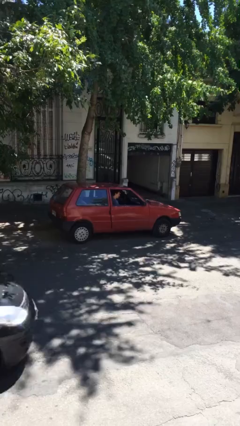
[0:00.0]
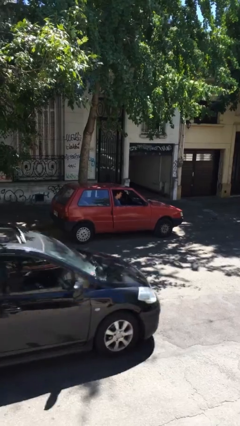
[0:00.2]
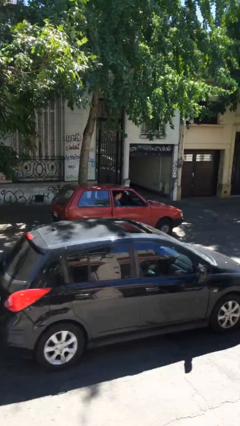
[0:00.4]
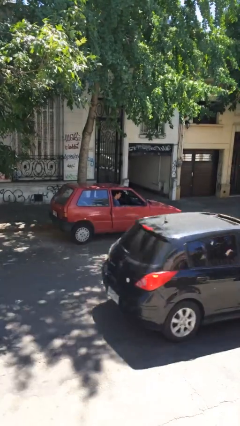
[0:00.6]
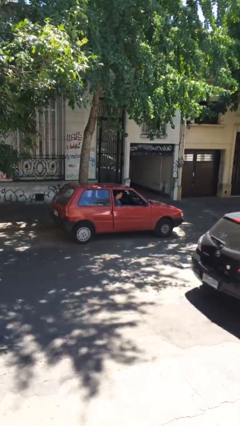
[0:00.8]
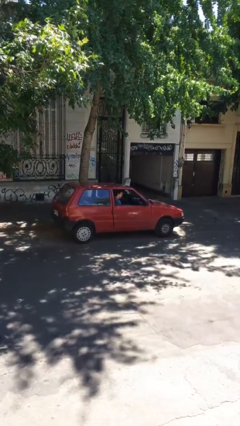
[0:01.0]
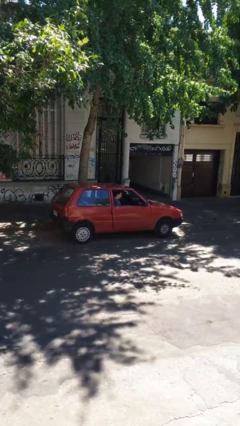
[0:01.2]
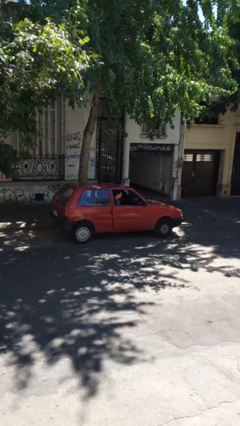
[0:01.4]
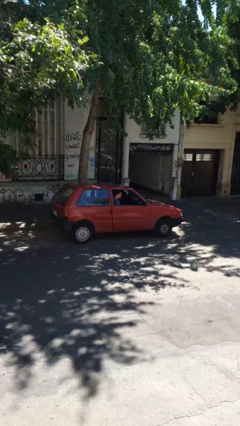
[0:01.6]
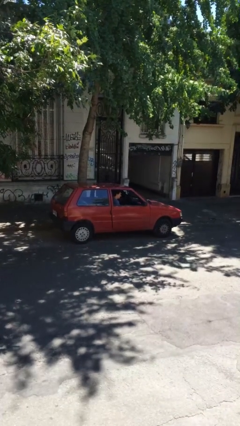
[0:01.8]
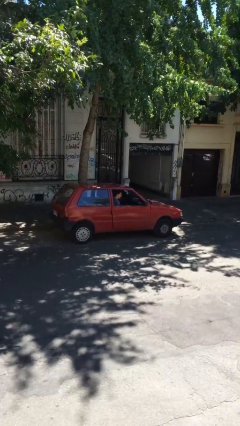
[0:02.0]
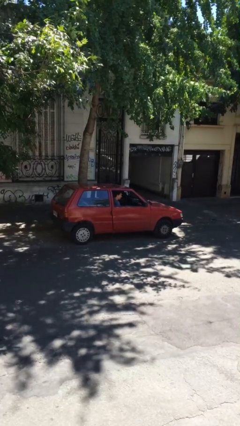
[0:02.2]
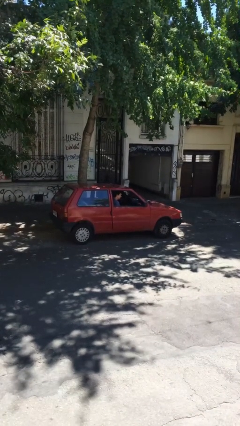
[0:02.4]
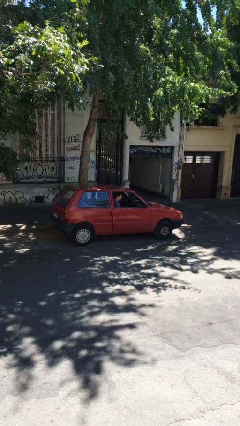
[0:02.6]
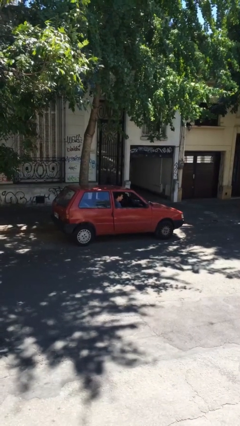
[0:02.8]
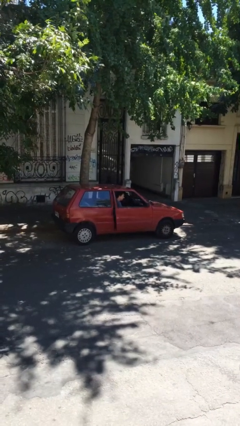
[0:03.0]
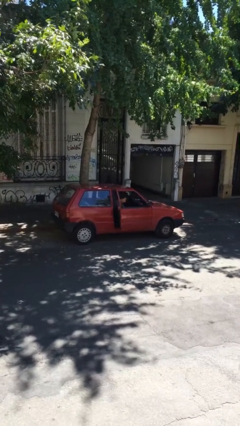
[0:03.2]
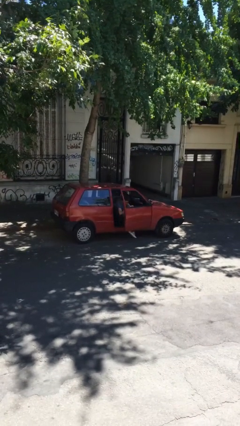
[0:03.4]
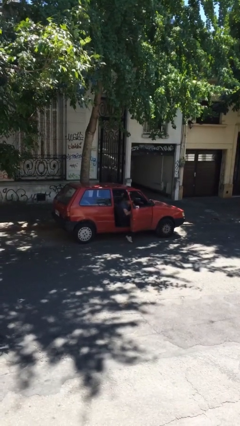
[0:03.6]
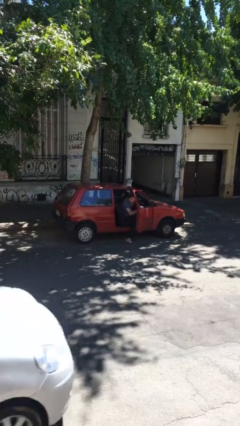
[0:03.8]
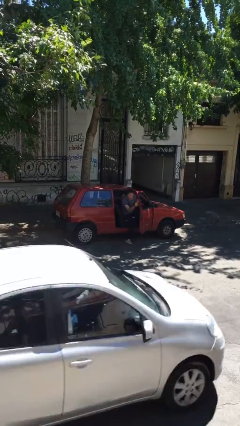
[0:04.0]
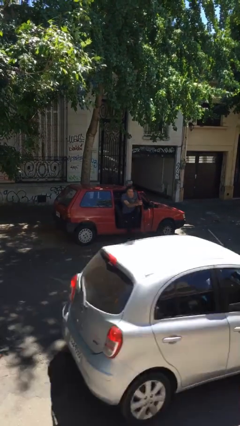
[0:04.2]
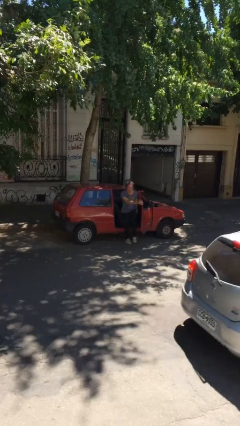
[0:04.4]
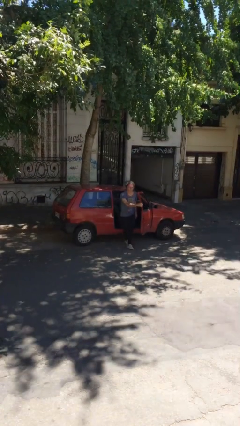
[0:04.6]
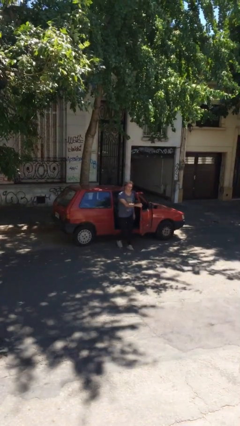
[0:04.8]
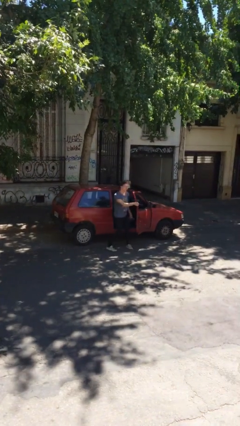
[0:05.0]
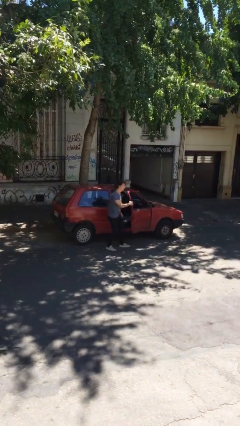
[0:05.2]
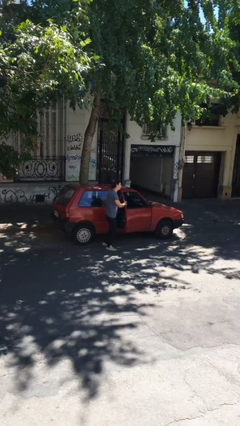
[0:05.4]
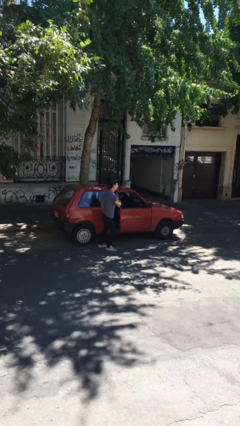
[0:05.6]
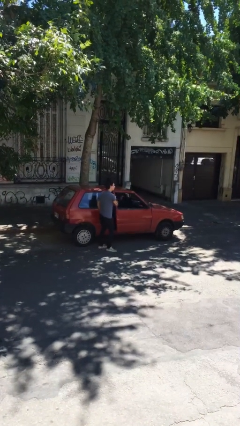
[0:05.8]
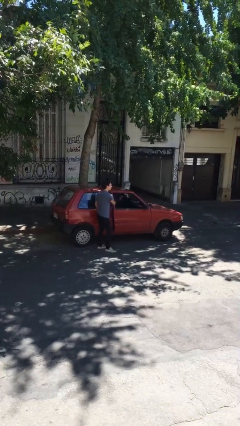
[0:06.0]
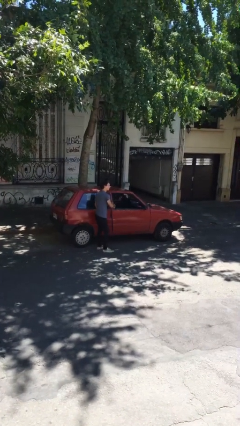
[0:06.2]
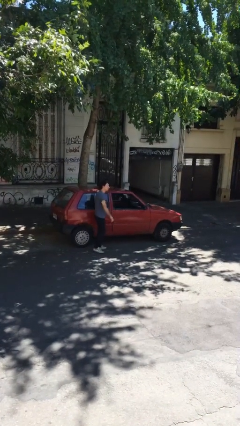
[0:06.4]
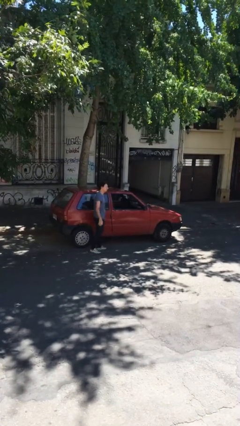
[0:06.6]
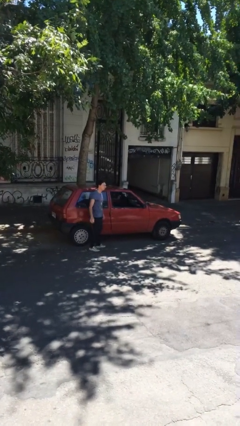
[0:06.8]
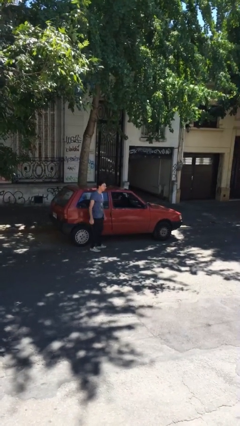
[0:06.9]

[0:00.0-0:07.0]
car drops off person

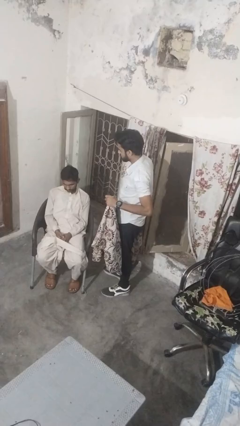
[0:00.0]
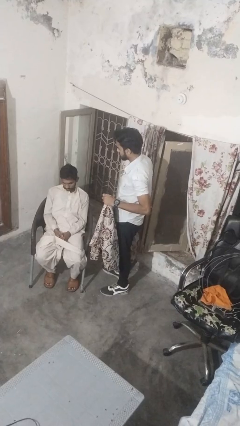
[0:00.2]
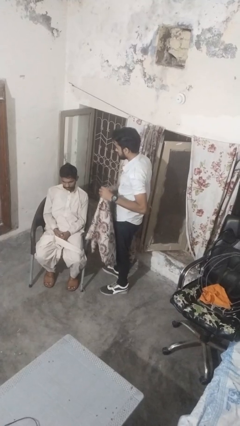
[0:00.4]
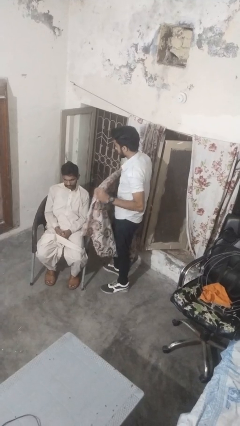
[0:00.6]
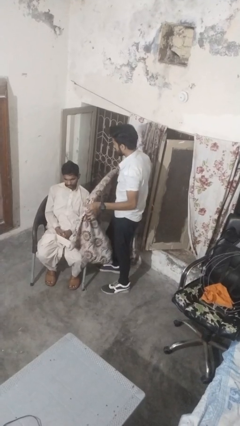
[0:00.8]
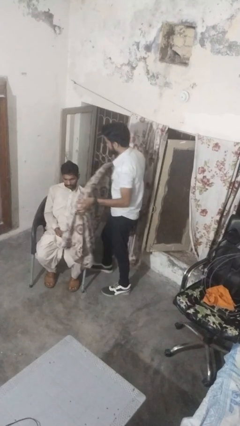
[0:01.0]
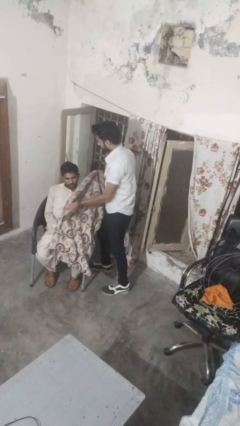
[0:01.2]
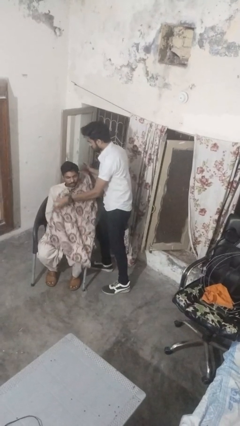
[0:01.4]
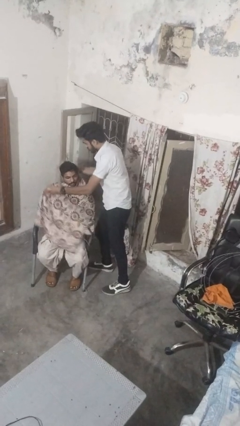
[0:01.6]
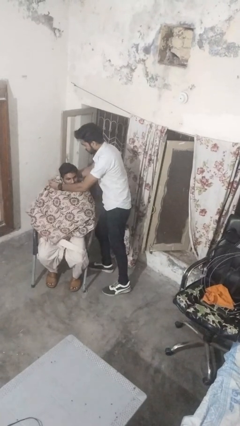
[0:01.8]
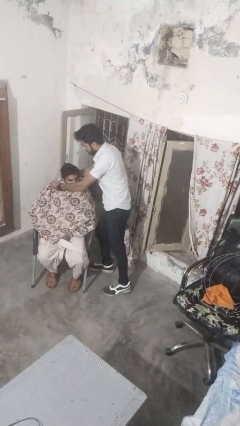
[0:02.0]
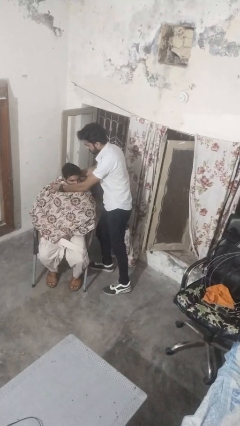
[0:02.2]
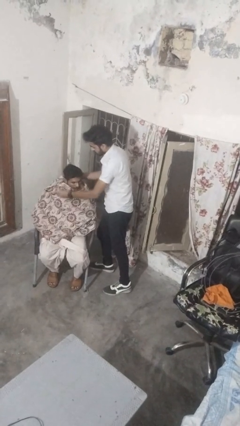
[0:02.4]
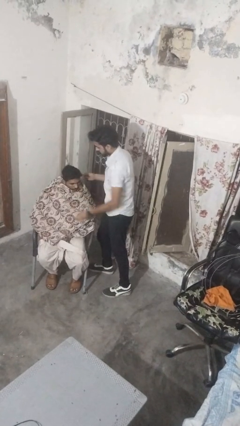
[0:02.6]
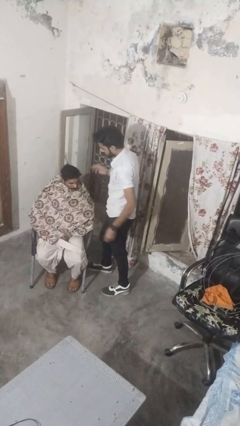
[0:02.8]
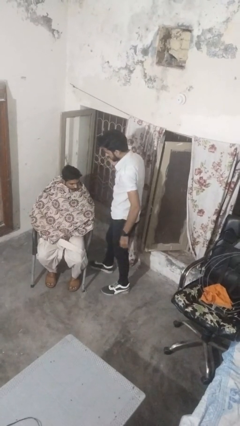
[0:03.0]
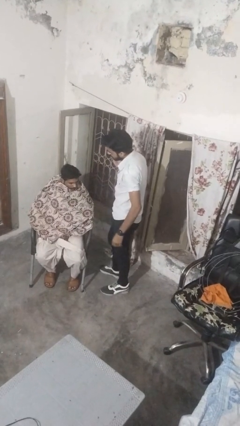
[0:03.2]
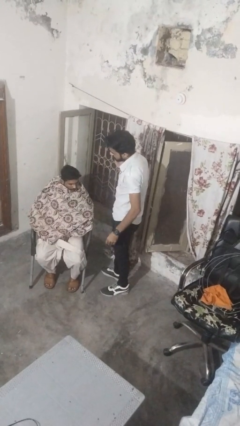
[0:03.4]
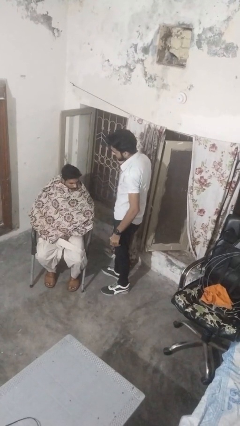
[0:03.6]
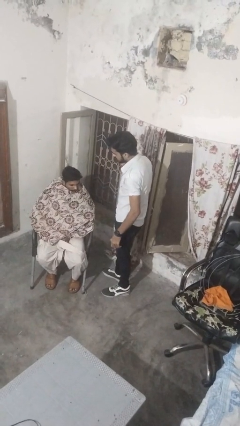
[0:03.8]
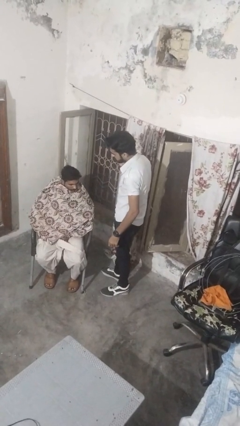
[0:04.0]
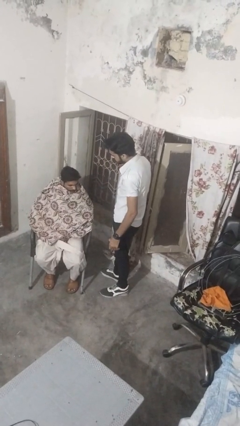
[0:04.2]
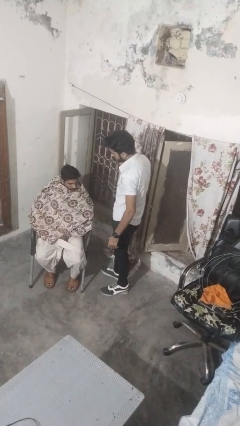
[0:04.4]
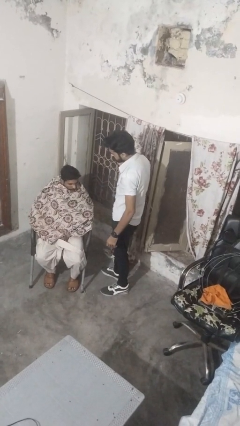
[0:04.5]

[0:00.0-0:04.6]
person covers friend with blanket

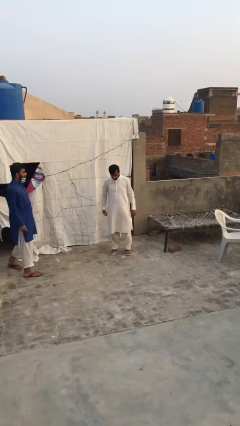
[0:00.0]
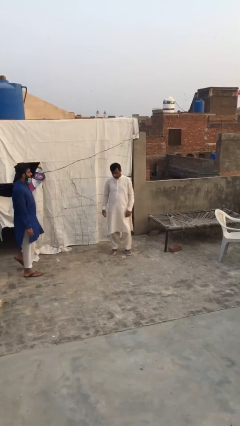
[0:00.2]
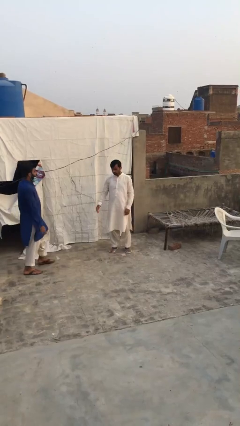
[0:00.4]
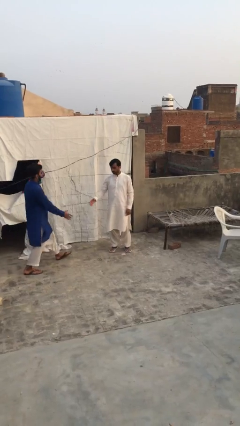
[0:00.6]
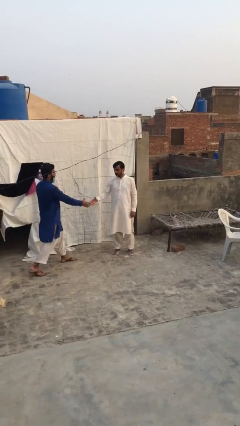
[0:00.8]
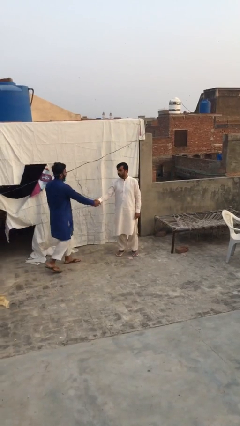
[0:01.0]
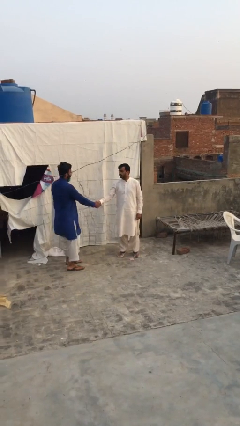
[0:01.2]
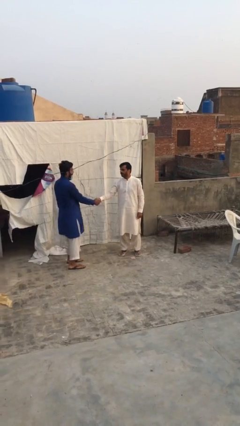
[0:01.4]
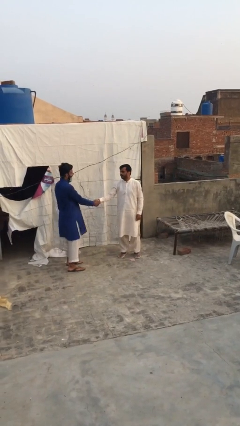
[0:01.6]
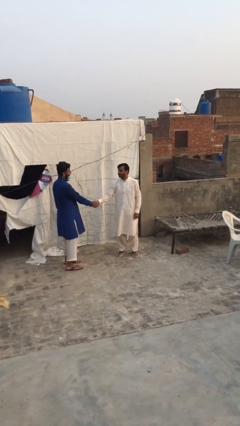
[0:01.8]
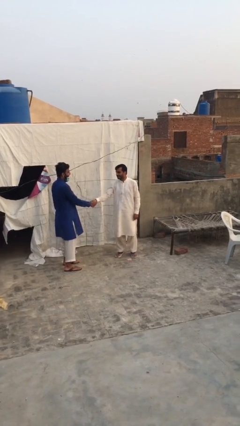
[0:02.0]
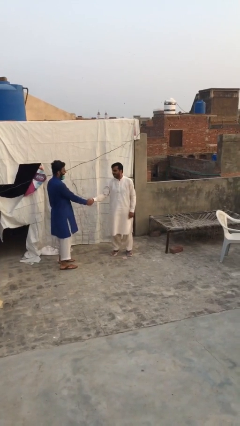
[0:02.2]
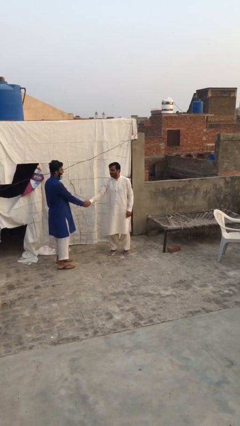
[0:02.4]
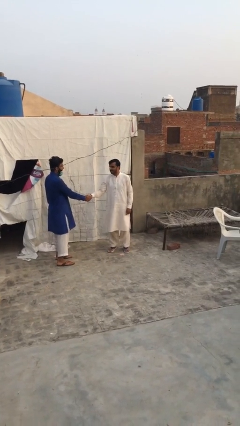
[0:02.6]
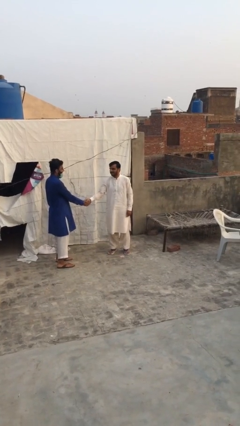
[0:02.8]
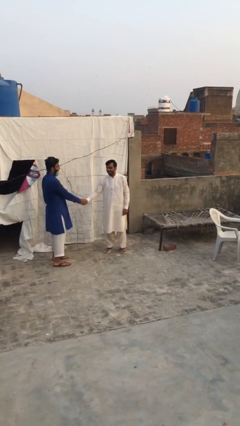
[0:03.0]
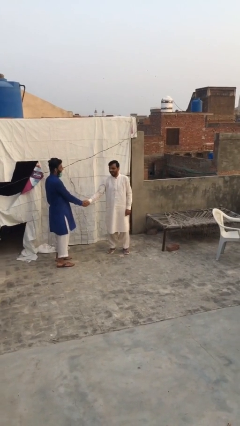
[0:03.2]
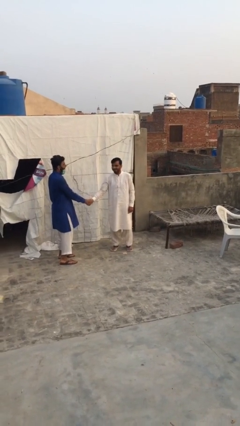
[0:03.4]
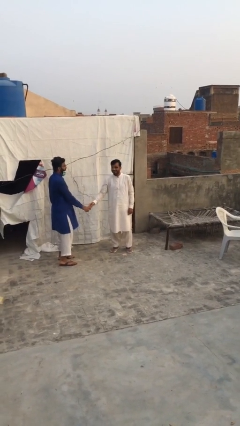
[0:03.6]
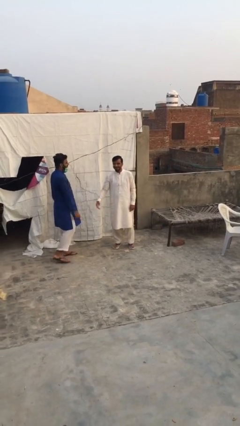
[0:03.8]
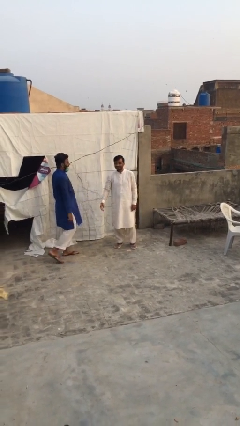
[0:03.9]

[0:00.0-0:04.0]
person shakes hand

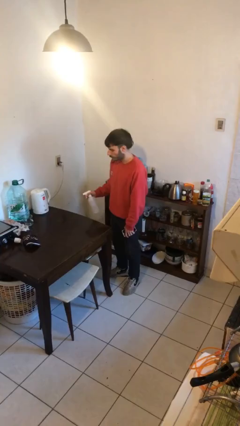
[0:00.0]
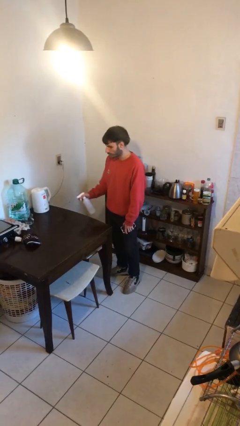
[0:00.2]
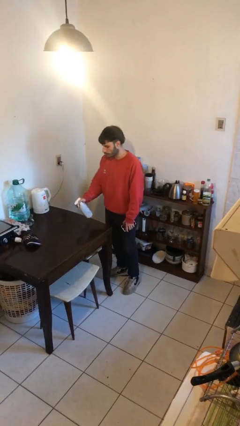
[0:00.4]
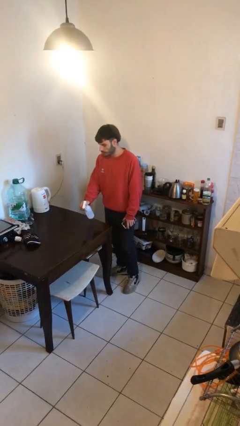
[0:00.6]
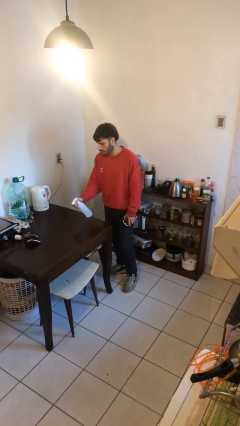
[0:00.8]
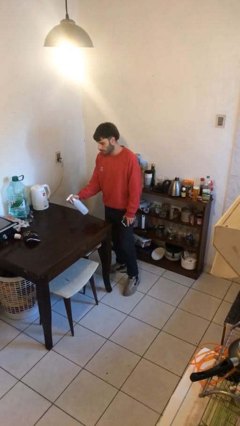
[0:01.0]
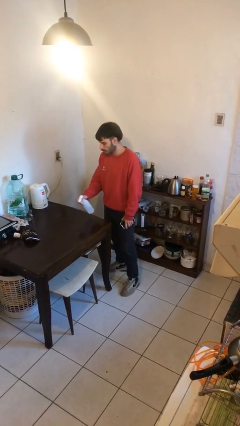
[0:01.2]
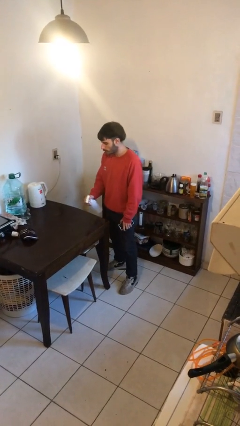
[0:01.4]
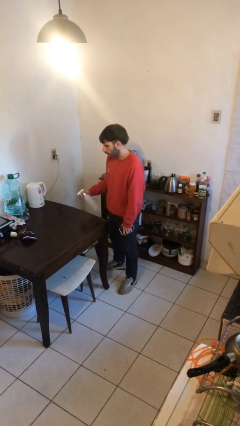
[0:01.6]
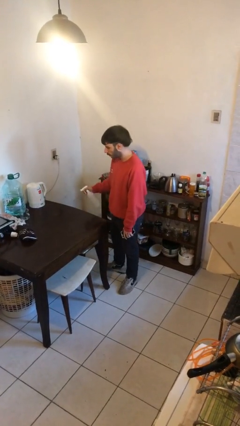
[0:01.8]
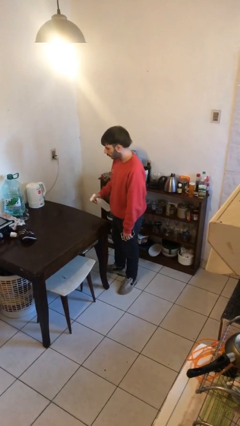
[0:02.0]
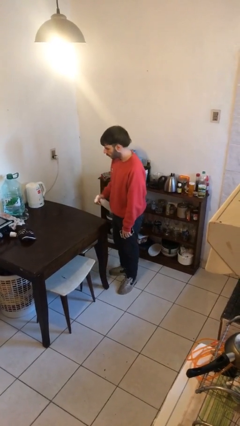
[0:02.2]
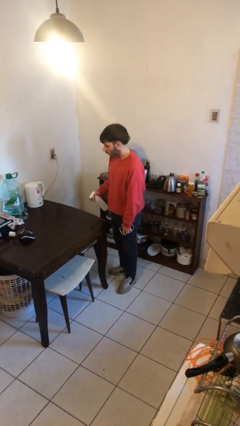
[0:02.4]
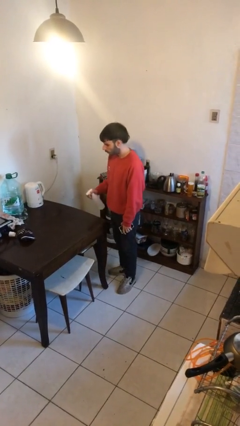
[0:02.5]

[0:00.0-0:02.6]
person sprays from bottle
